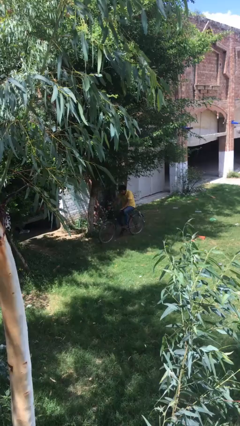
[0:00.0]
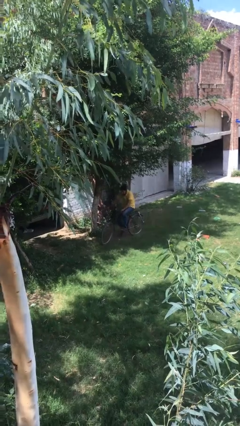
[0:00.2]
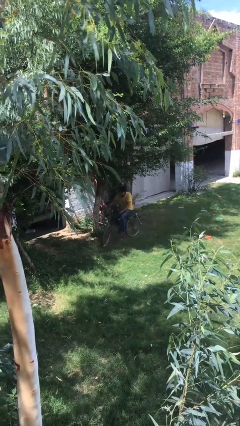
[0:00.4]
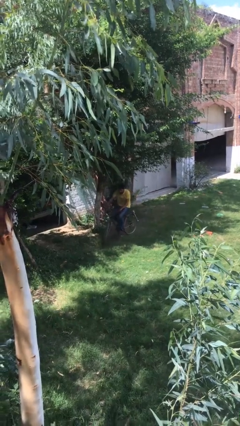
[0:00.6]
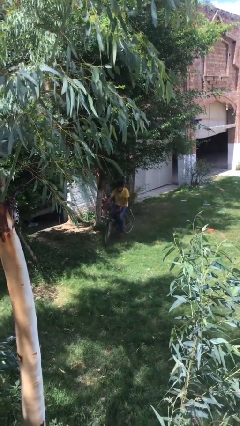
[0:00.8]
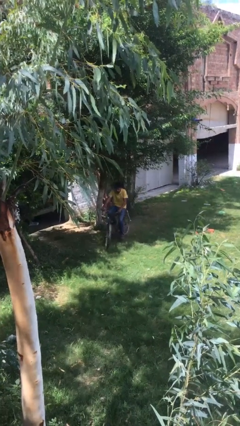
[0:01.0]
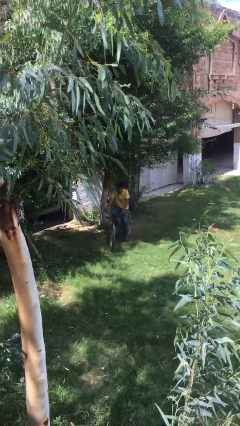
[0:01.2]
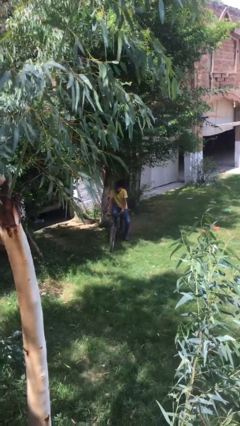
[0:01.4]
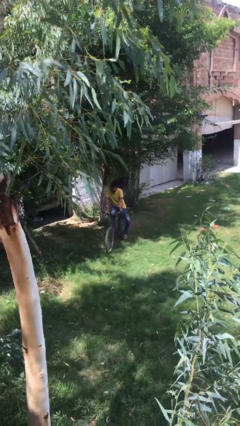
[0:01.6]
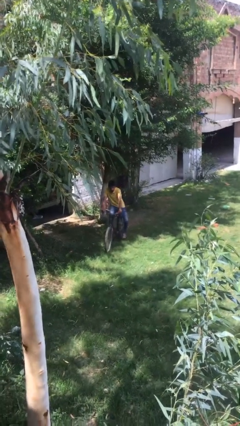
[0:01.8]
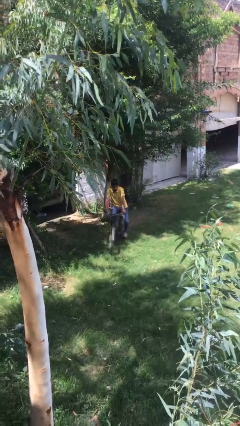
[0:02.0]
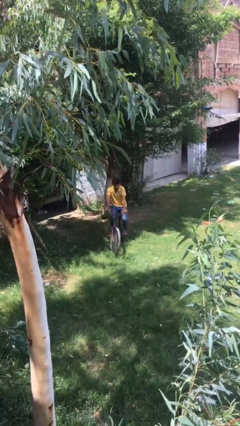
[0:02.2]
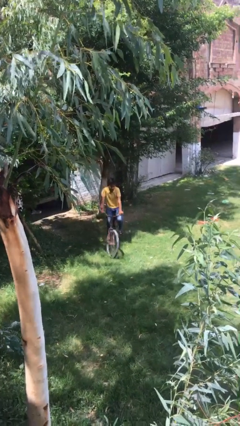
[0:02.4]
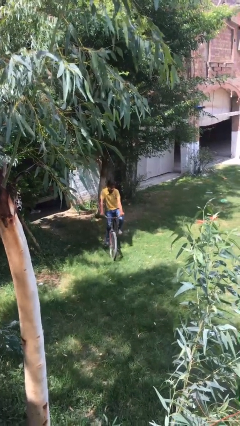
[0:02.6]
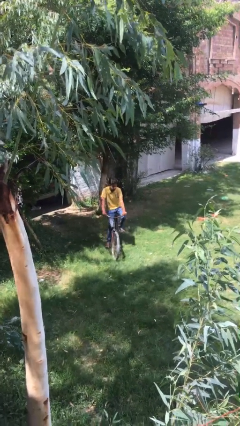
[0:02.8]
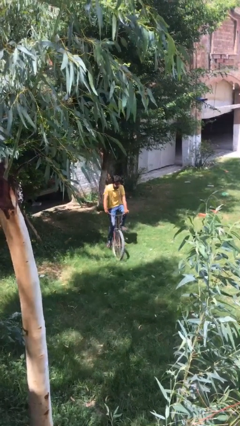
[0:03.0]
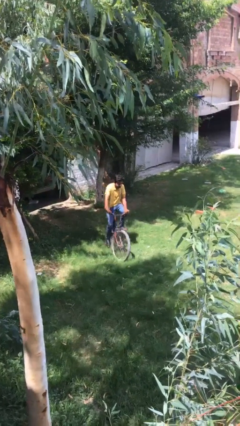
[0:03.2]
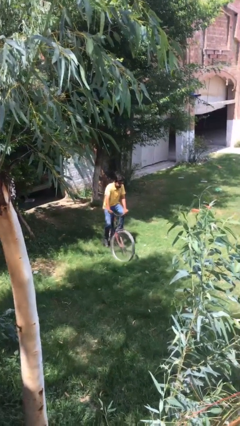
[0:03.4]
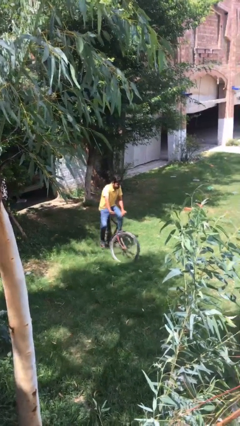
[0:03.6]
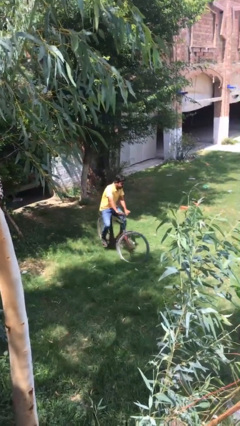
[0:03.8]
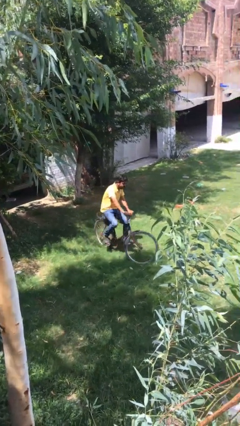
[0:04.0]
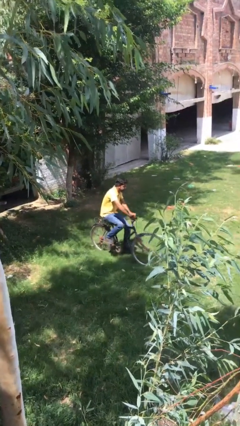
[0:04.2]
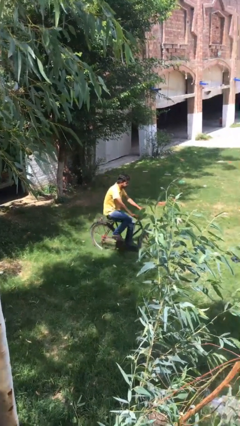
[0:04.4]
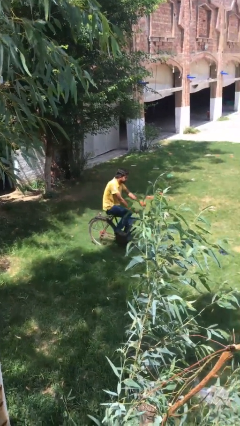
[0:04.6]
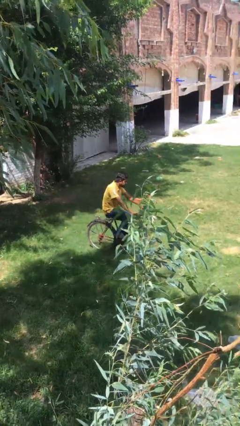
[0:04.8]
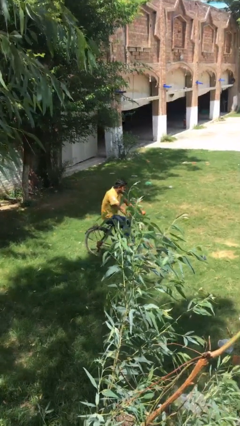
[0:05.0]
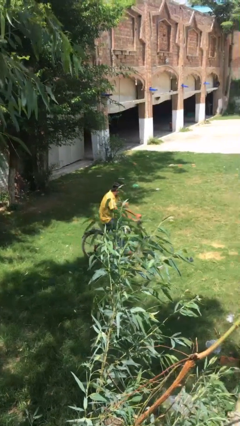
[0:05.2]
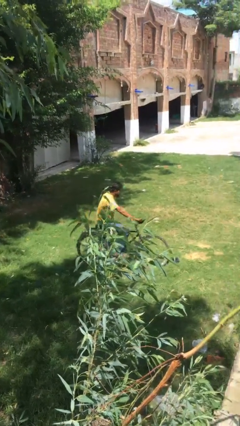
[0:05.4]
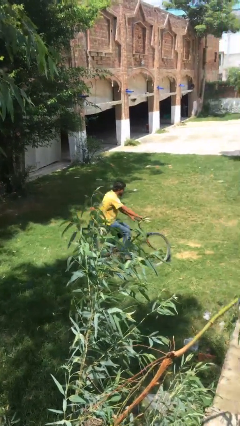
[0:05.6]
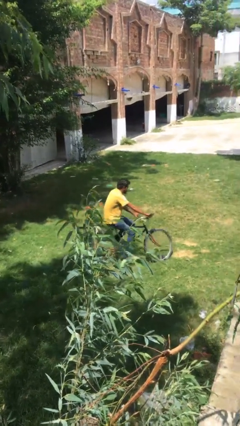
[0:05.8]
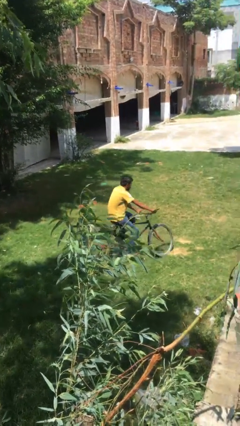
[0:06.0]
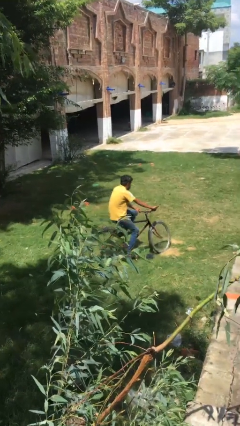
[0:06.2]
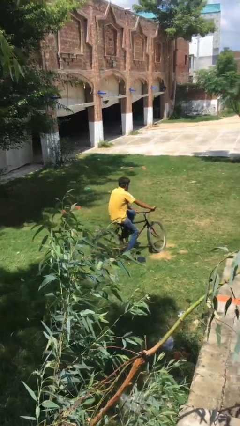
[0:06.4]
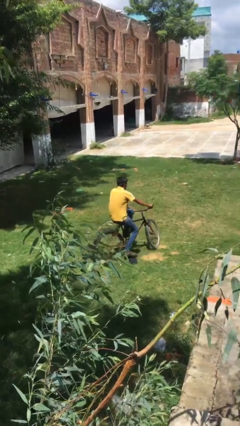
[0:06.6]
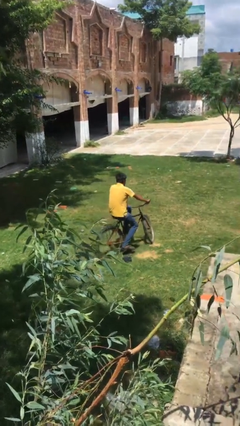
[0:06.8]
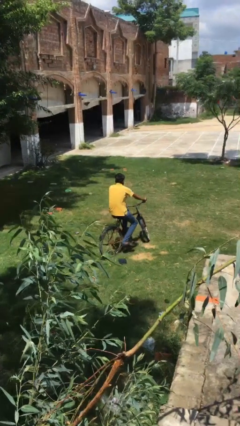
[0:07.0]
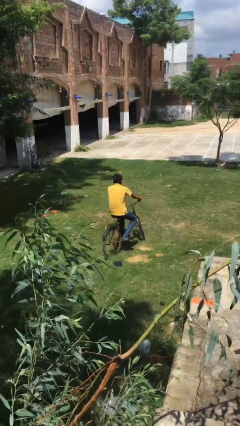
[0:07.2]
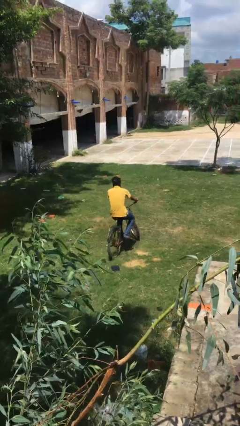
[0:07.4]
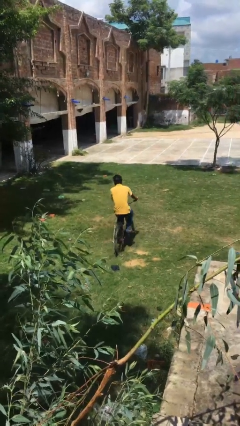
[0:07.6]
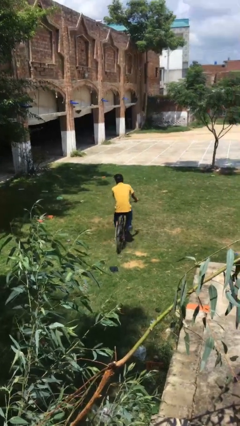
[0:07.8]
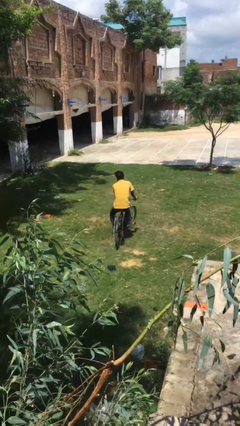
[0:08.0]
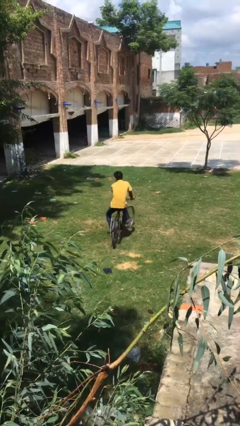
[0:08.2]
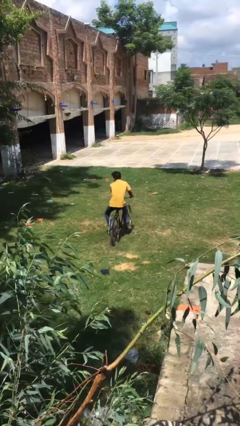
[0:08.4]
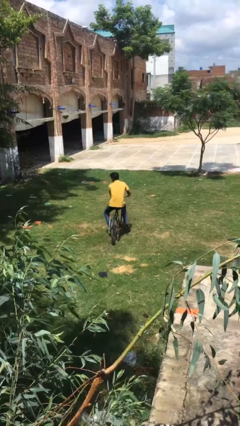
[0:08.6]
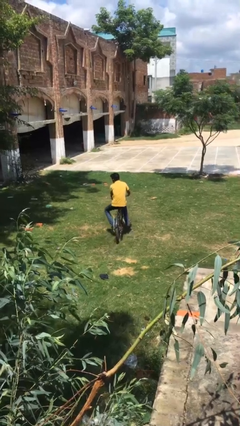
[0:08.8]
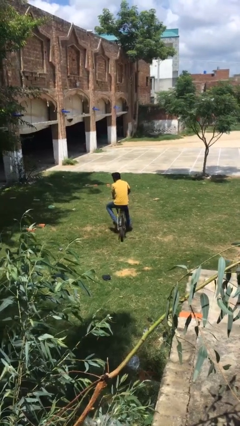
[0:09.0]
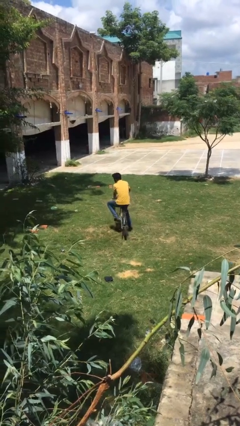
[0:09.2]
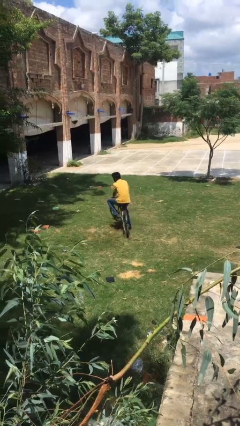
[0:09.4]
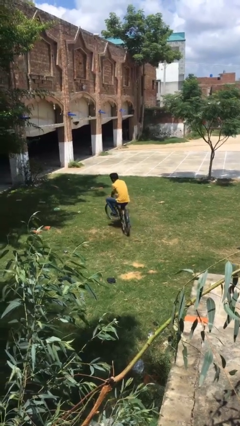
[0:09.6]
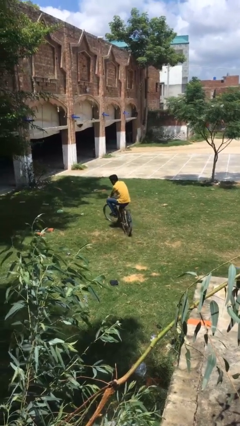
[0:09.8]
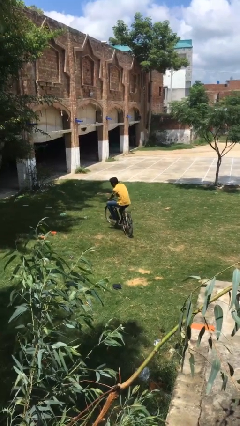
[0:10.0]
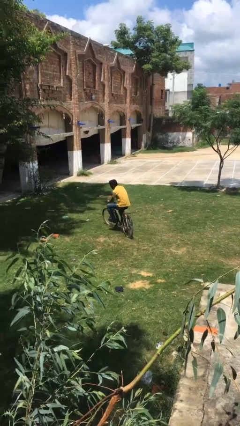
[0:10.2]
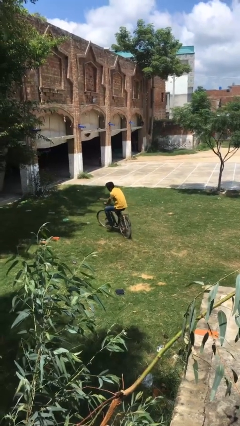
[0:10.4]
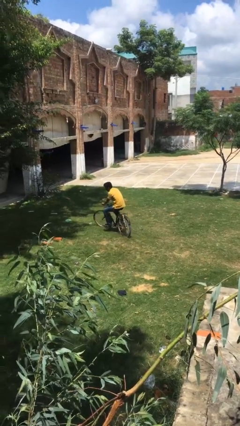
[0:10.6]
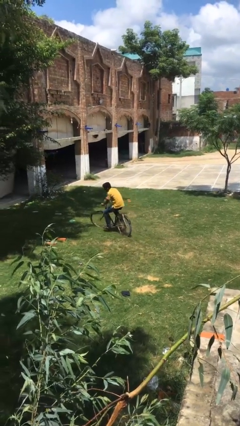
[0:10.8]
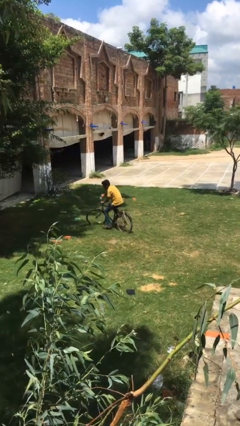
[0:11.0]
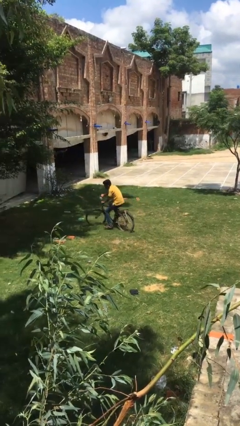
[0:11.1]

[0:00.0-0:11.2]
person rides bicycle

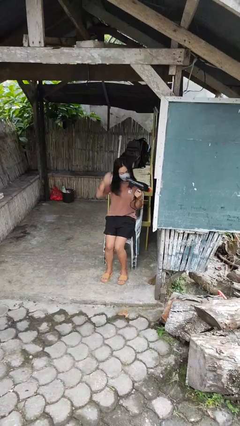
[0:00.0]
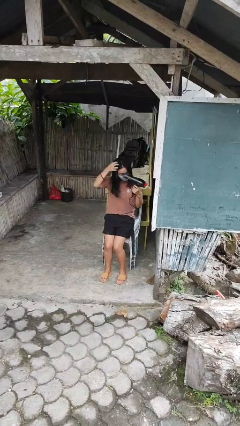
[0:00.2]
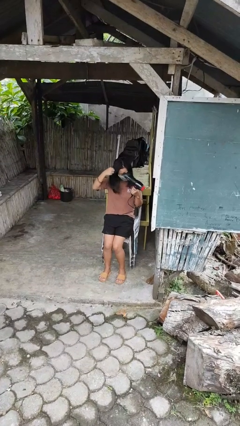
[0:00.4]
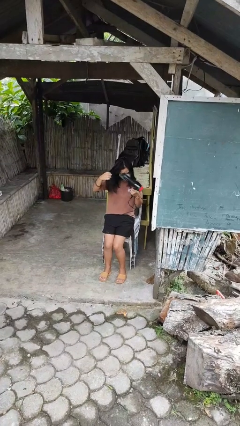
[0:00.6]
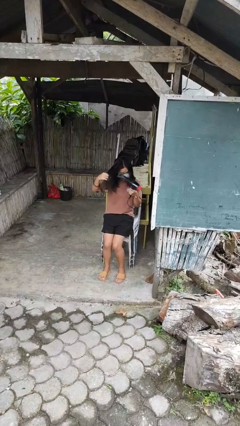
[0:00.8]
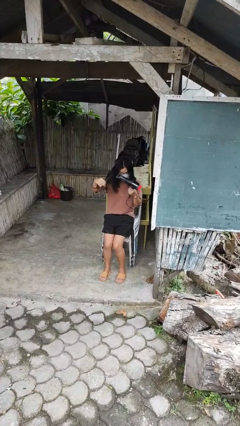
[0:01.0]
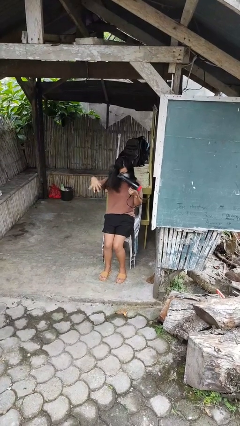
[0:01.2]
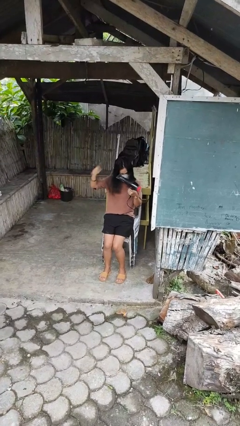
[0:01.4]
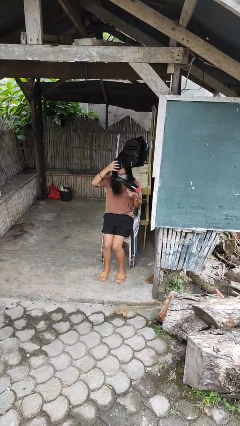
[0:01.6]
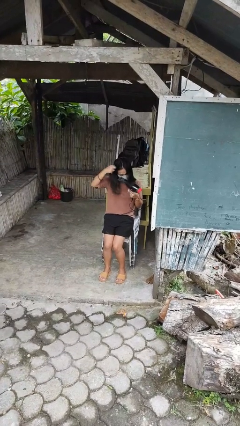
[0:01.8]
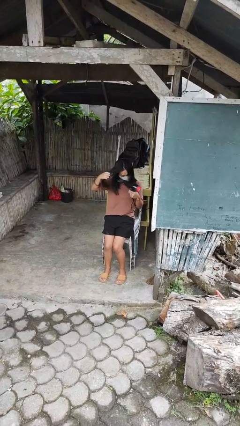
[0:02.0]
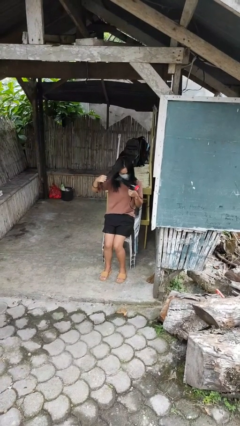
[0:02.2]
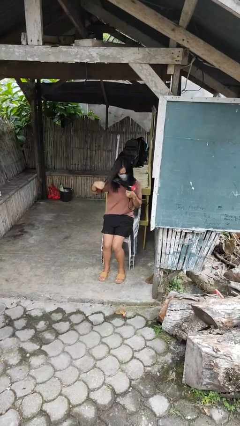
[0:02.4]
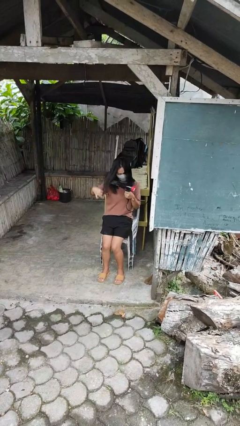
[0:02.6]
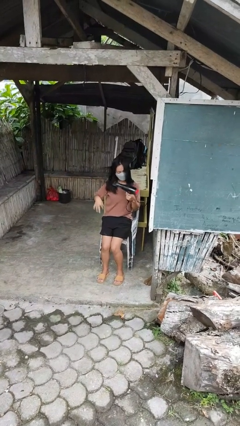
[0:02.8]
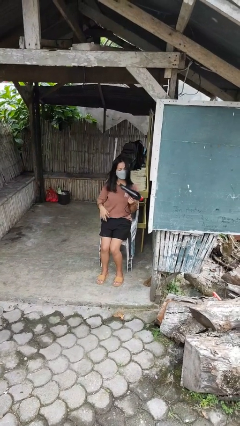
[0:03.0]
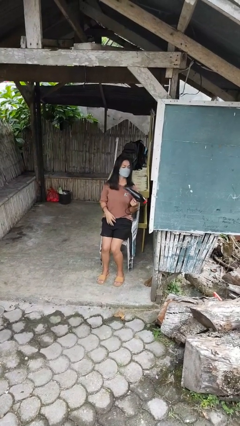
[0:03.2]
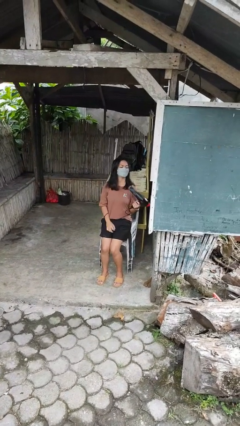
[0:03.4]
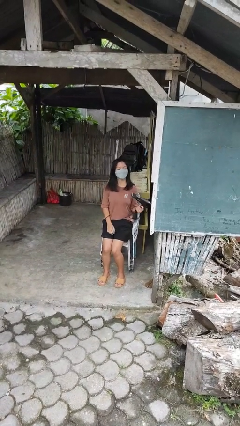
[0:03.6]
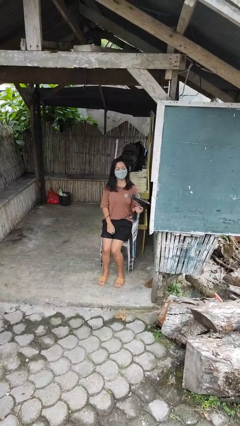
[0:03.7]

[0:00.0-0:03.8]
person dries hair with hairdryer

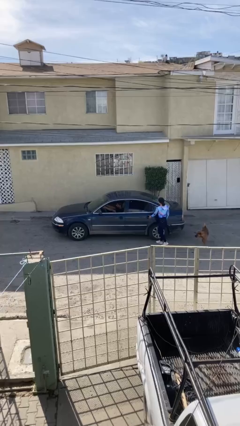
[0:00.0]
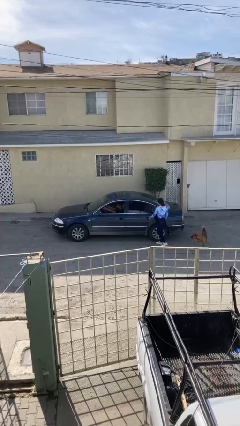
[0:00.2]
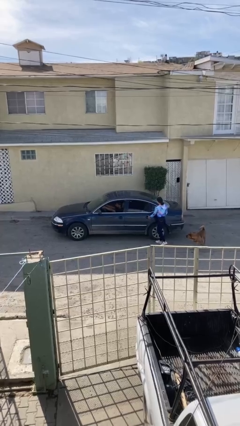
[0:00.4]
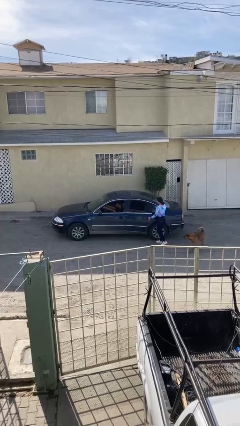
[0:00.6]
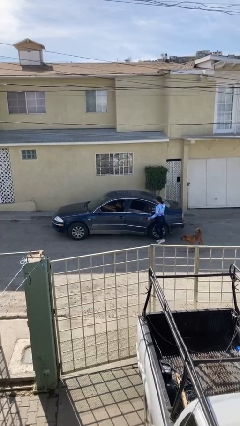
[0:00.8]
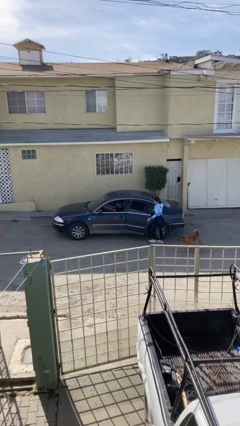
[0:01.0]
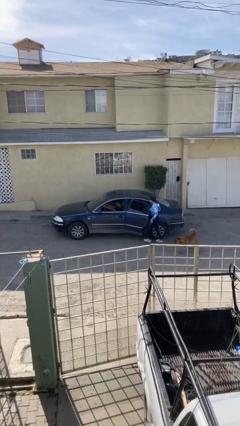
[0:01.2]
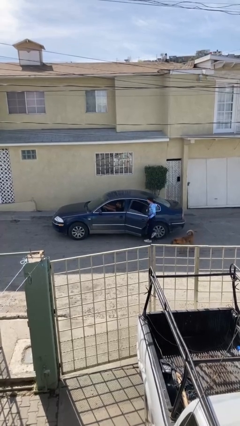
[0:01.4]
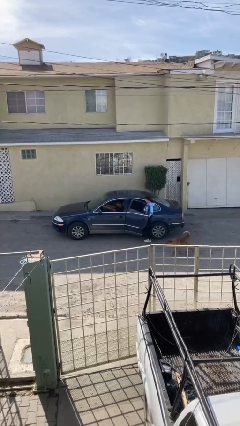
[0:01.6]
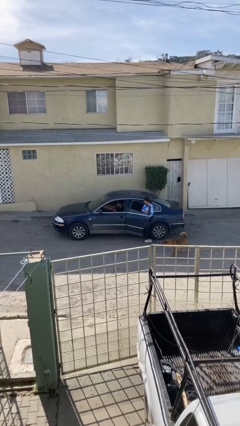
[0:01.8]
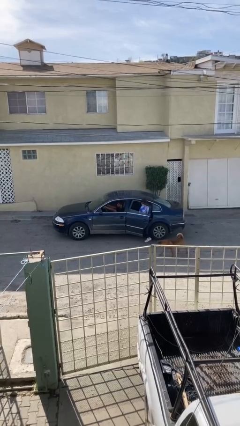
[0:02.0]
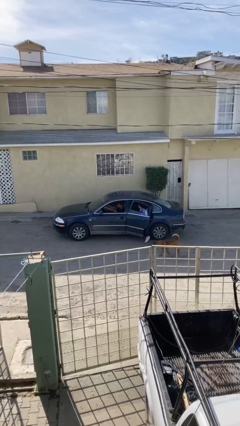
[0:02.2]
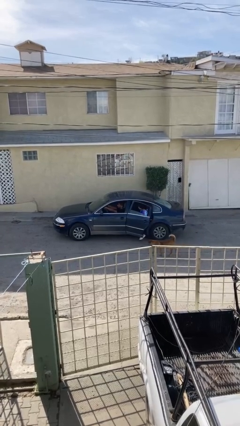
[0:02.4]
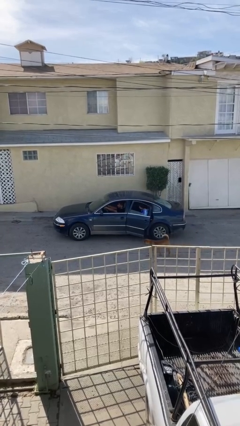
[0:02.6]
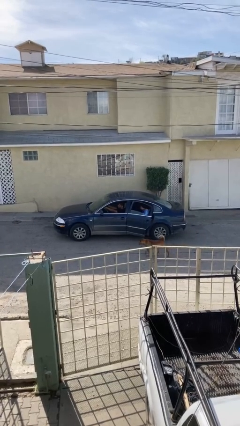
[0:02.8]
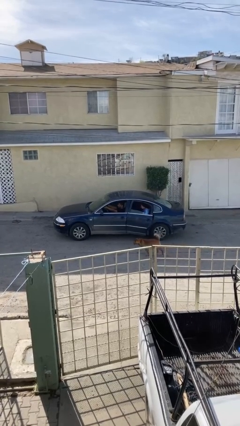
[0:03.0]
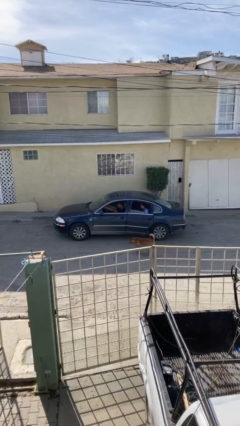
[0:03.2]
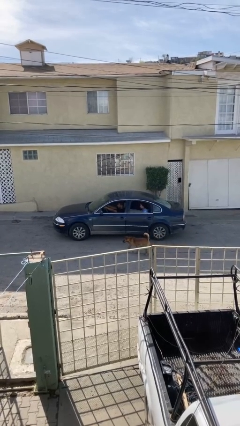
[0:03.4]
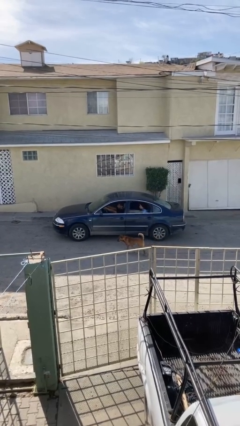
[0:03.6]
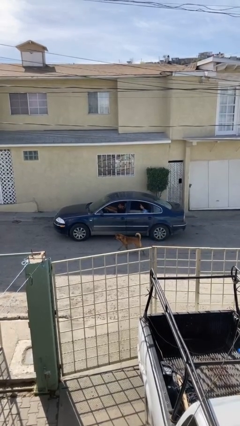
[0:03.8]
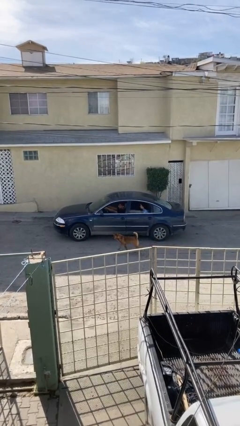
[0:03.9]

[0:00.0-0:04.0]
car picks up person
